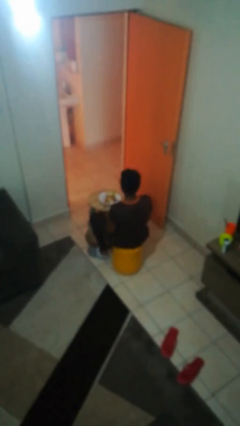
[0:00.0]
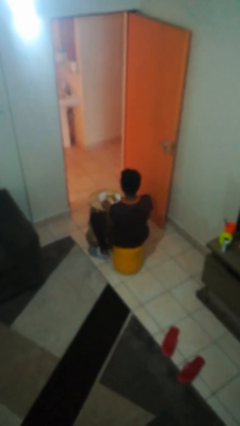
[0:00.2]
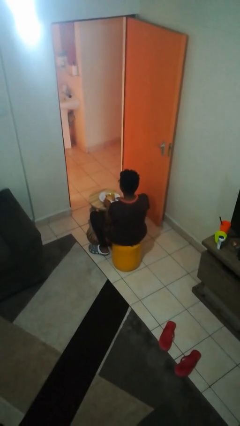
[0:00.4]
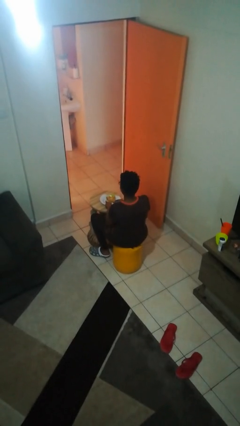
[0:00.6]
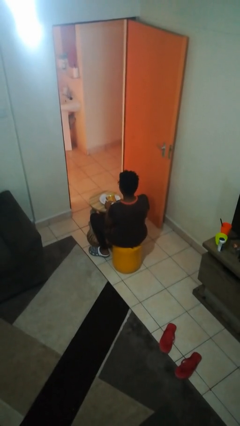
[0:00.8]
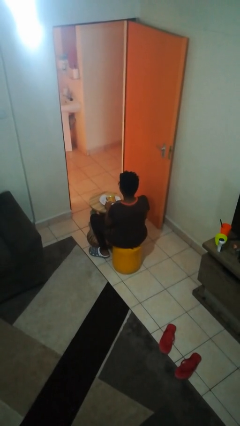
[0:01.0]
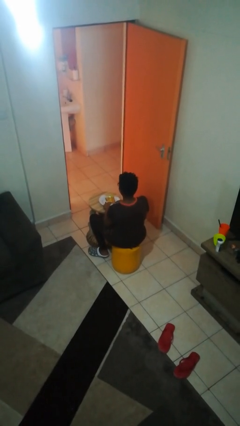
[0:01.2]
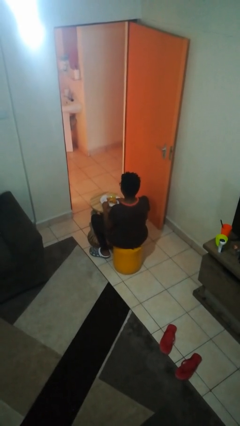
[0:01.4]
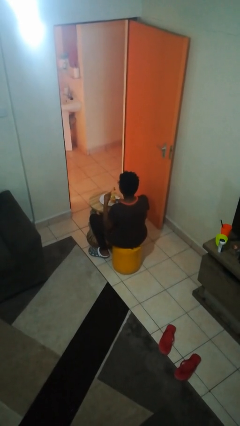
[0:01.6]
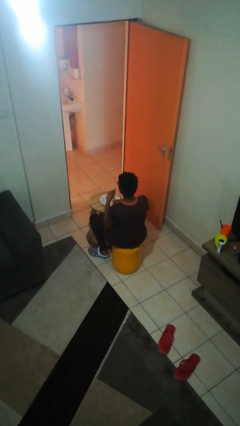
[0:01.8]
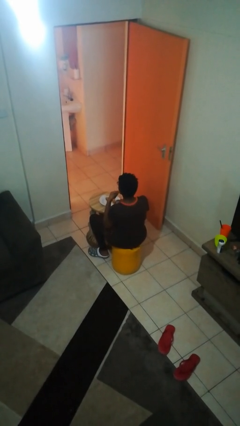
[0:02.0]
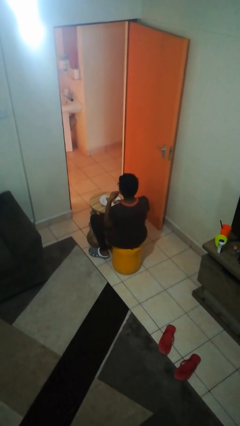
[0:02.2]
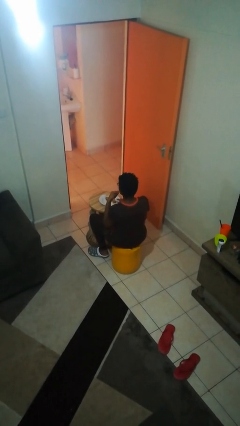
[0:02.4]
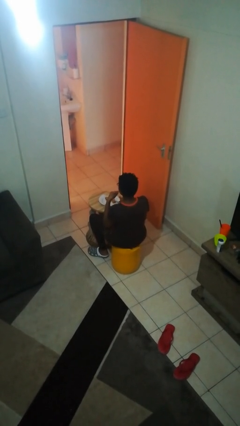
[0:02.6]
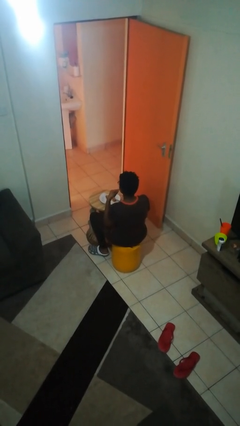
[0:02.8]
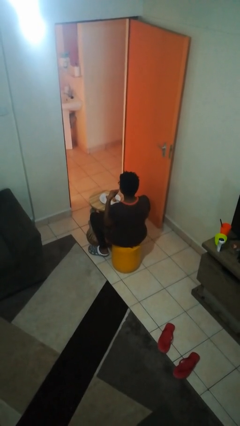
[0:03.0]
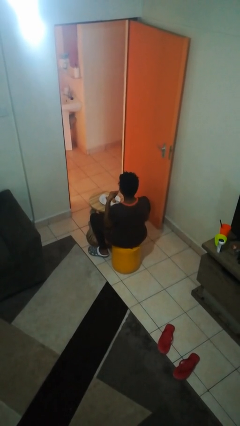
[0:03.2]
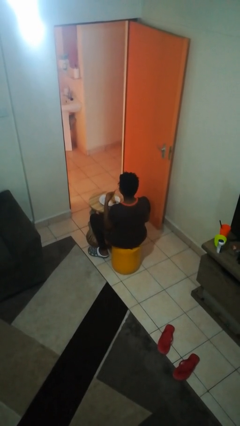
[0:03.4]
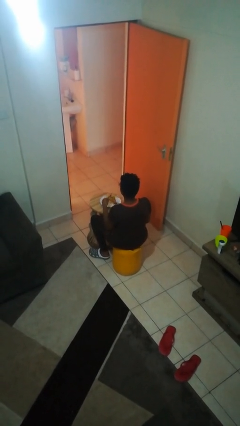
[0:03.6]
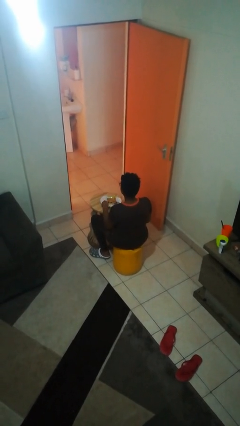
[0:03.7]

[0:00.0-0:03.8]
person eats with utensil

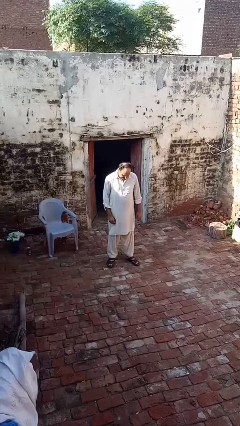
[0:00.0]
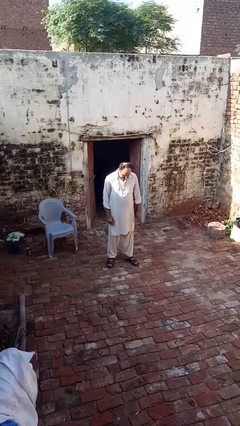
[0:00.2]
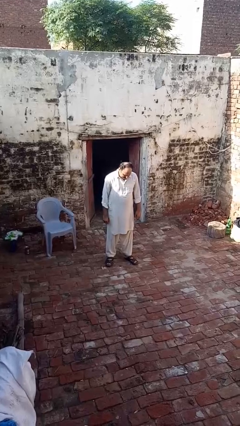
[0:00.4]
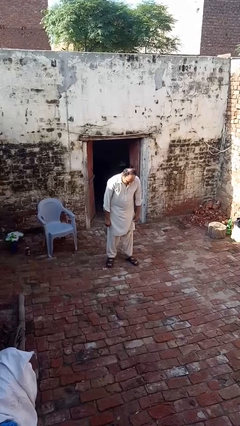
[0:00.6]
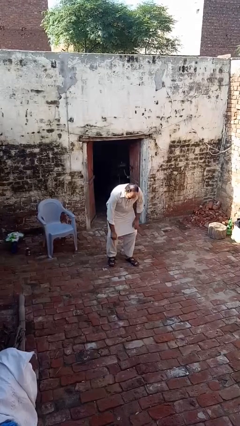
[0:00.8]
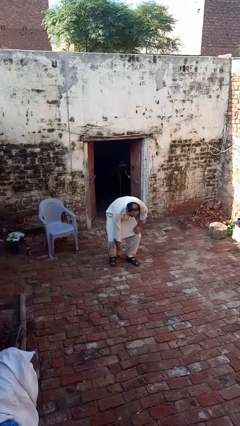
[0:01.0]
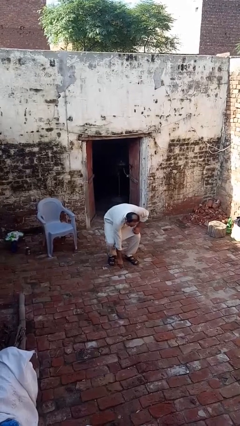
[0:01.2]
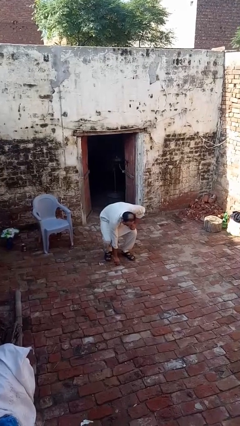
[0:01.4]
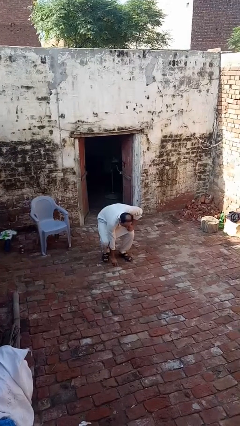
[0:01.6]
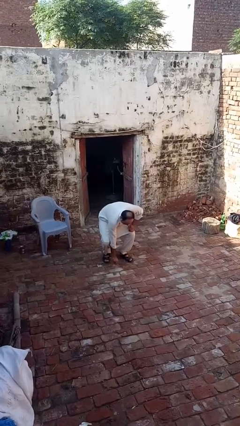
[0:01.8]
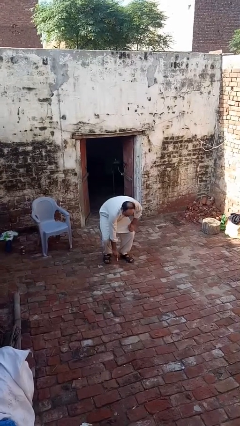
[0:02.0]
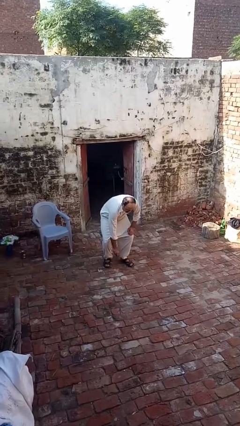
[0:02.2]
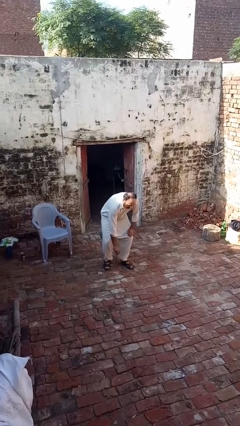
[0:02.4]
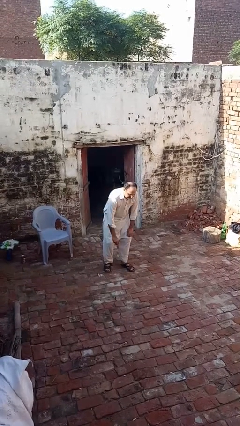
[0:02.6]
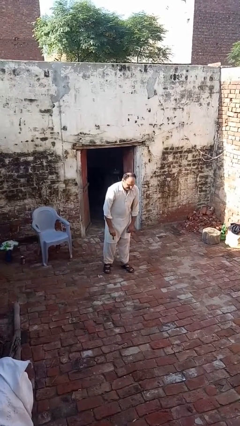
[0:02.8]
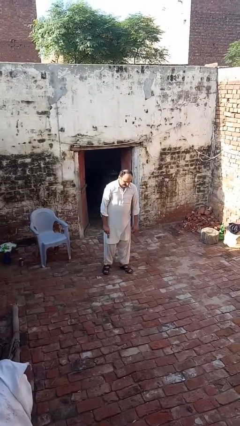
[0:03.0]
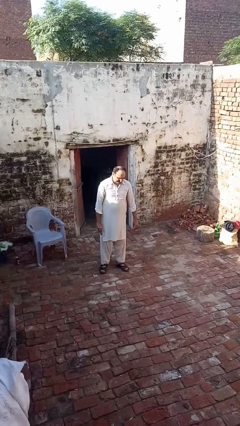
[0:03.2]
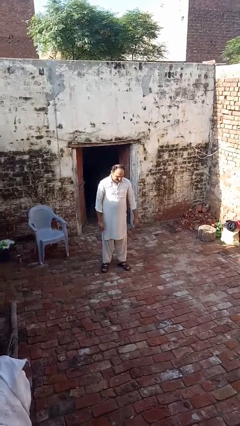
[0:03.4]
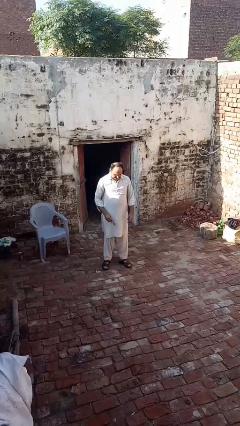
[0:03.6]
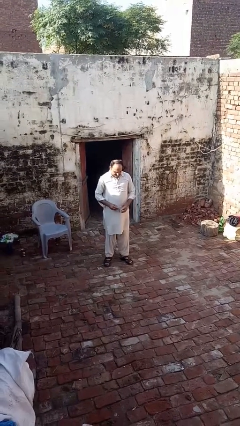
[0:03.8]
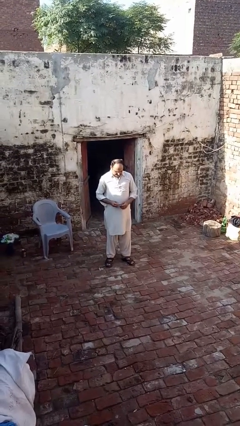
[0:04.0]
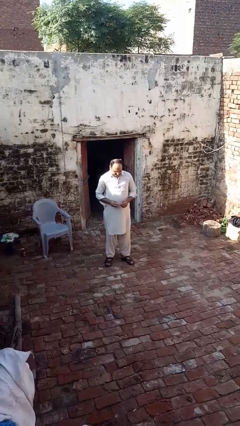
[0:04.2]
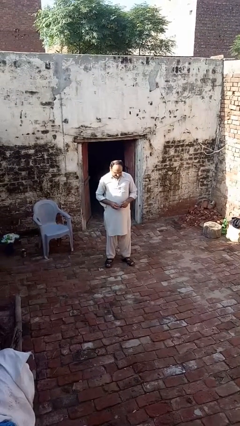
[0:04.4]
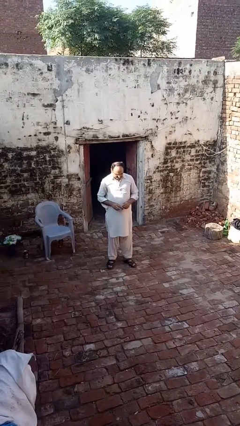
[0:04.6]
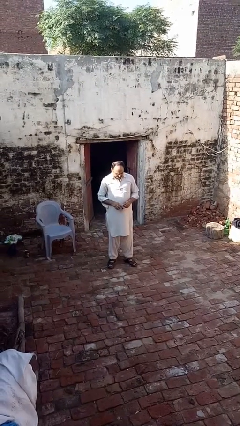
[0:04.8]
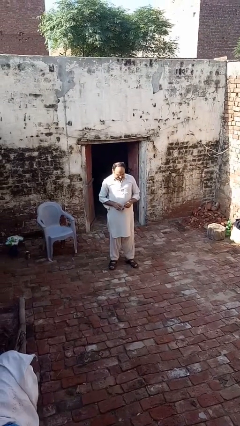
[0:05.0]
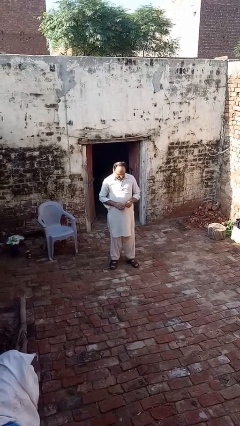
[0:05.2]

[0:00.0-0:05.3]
person picks up object from floor

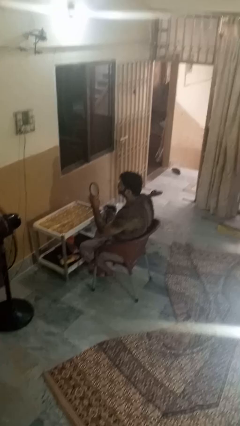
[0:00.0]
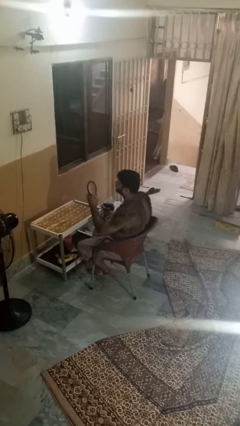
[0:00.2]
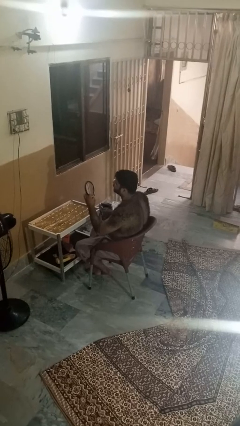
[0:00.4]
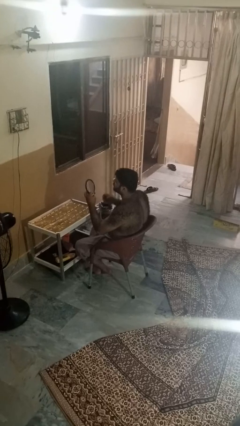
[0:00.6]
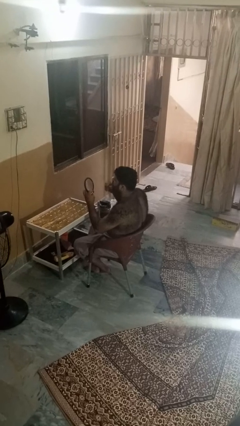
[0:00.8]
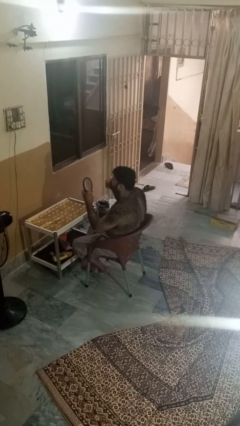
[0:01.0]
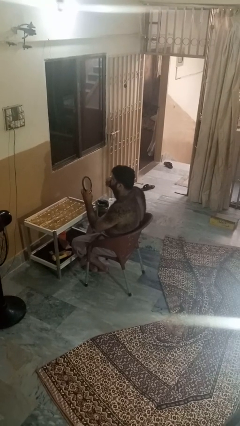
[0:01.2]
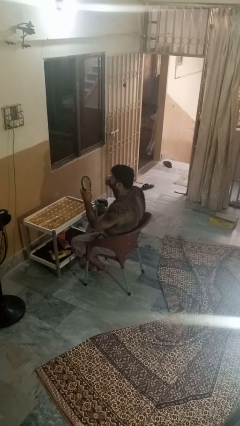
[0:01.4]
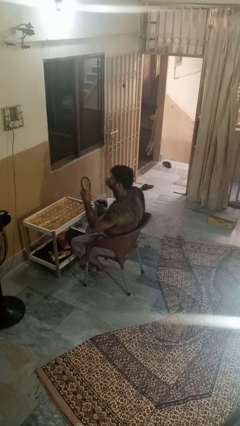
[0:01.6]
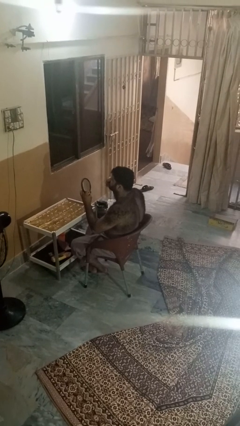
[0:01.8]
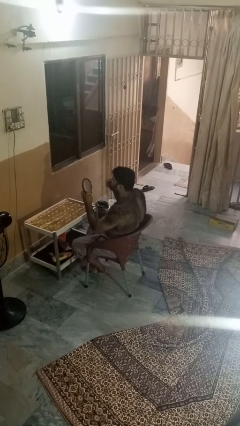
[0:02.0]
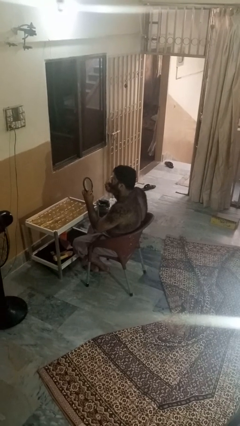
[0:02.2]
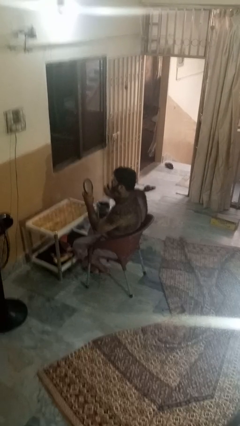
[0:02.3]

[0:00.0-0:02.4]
person applies lip makeup

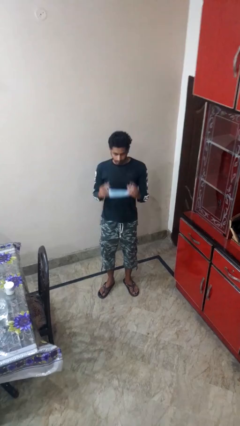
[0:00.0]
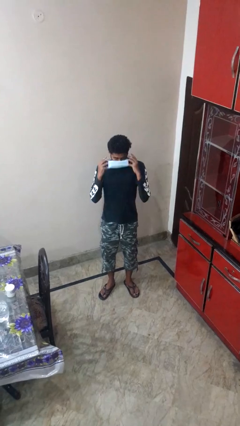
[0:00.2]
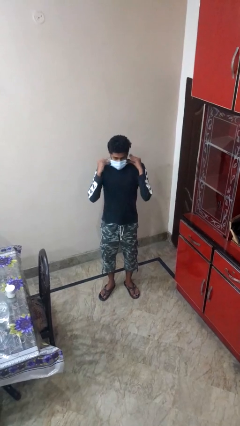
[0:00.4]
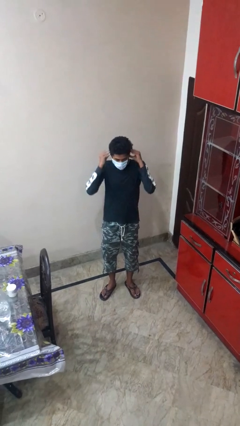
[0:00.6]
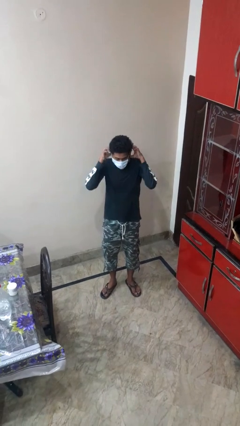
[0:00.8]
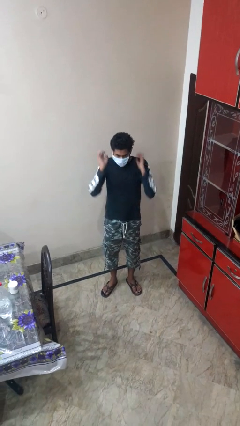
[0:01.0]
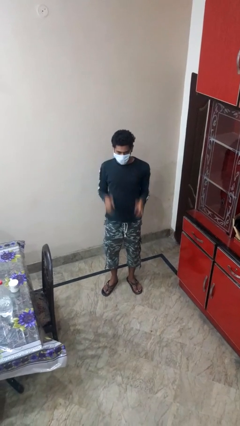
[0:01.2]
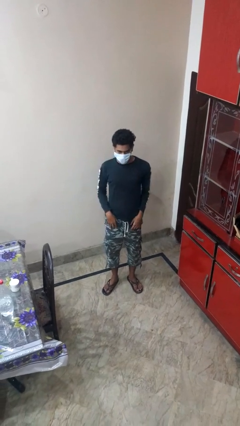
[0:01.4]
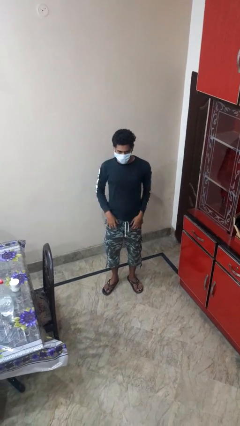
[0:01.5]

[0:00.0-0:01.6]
person puts on facemask

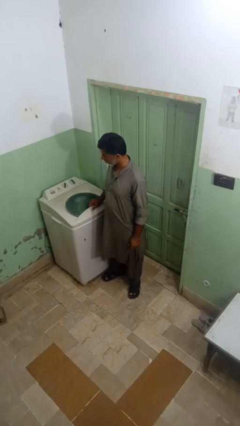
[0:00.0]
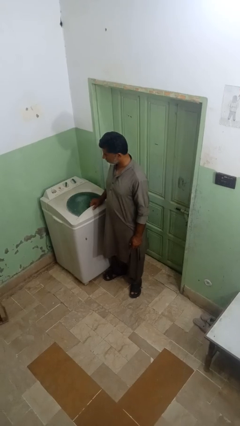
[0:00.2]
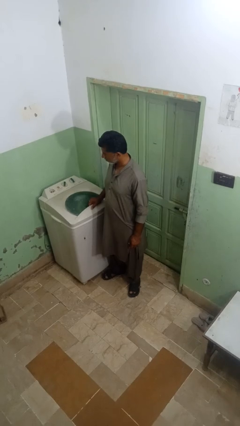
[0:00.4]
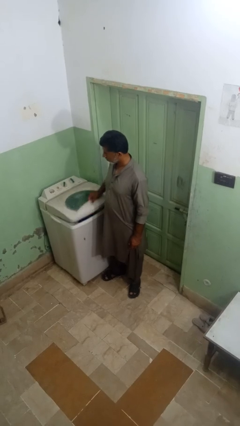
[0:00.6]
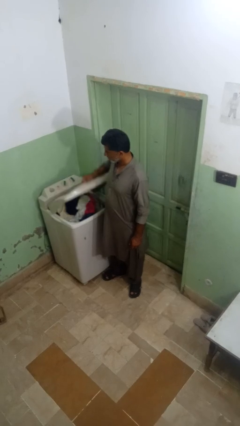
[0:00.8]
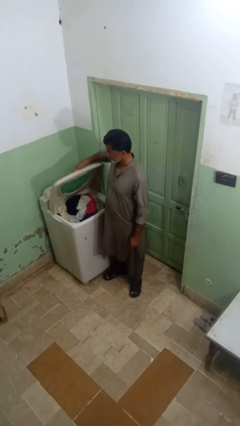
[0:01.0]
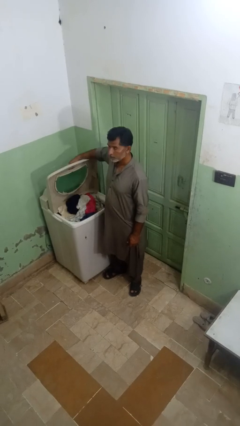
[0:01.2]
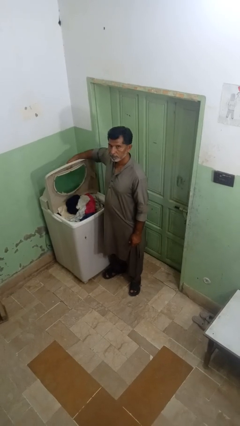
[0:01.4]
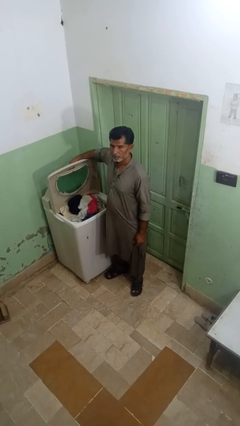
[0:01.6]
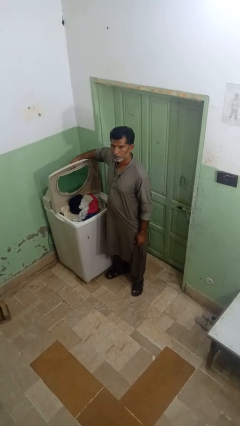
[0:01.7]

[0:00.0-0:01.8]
person opens clothes washer

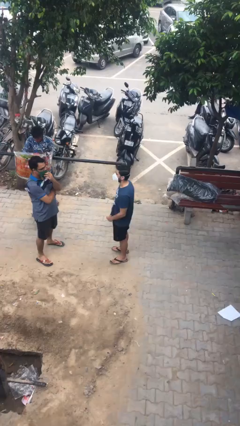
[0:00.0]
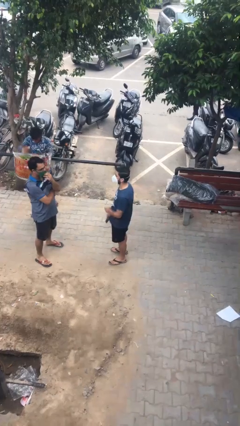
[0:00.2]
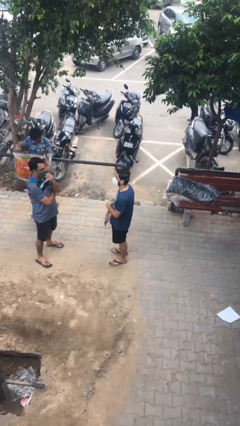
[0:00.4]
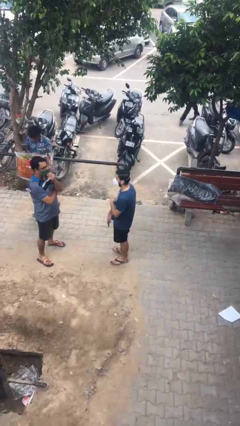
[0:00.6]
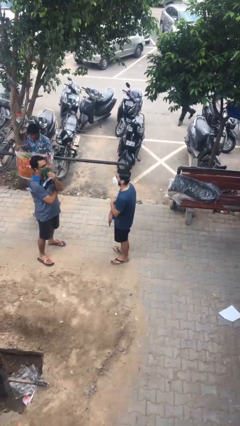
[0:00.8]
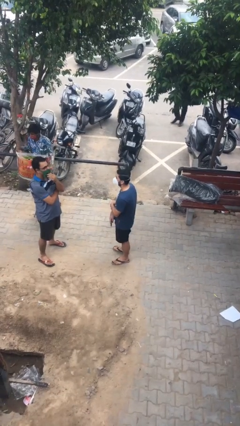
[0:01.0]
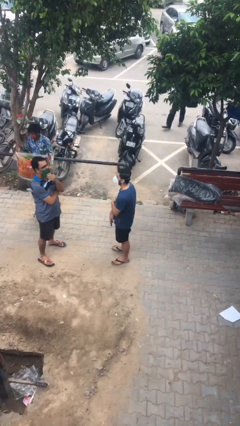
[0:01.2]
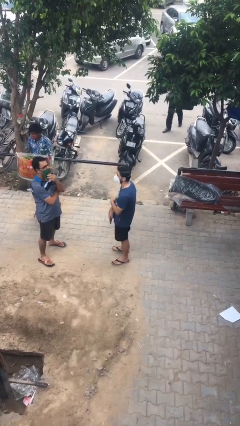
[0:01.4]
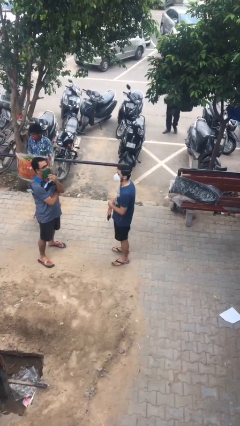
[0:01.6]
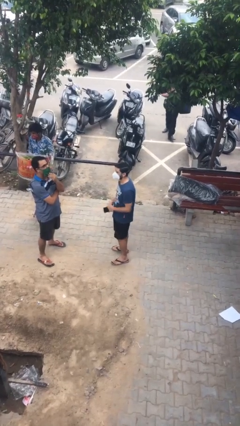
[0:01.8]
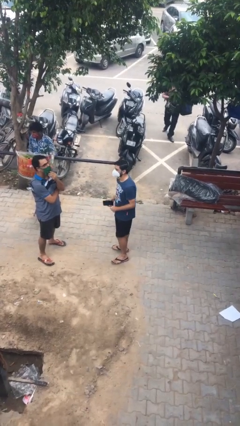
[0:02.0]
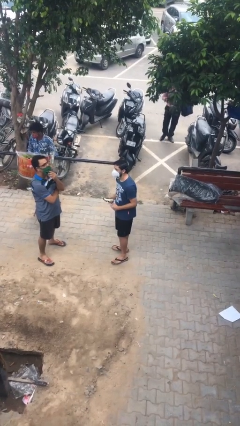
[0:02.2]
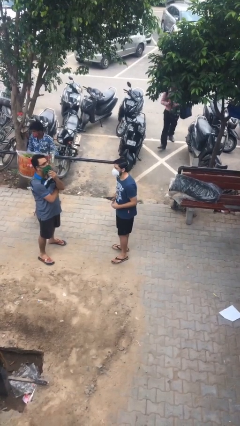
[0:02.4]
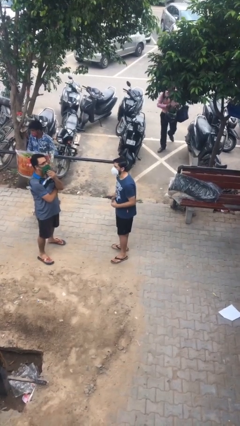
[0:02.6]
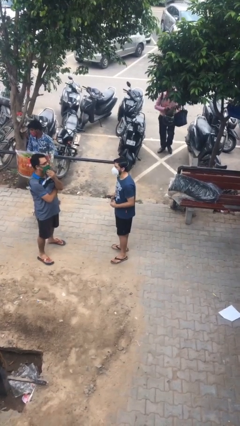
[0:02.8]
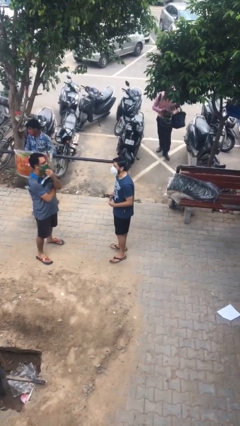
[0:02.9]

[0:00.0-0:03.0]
person talks to person
